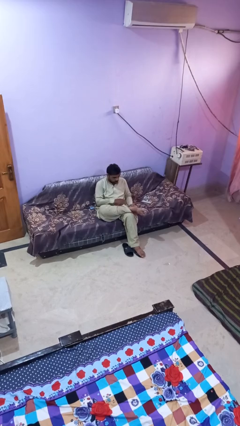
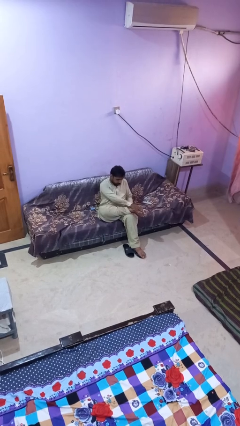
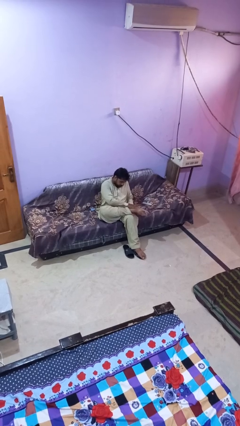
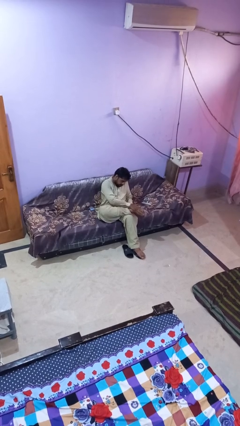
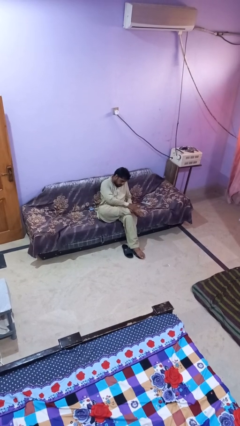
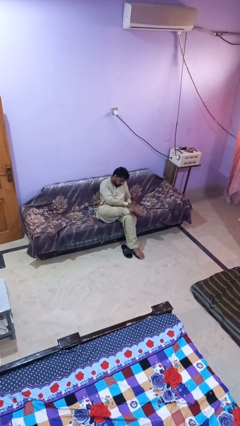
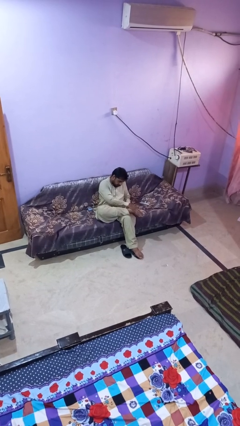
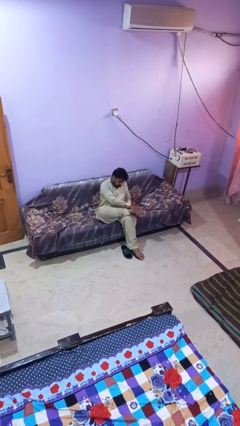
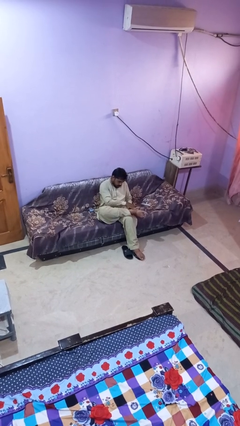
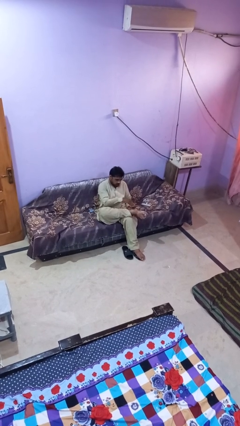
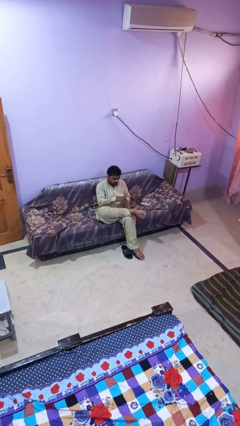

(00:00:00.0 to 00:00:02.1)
person rubs foot

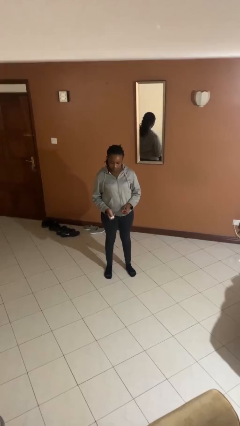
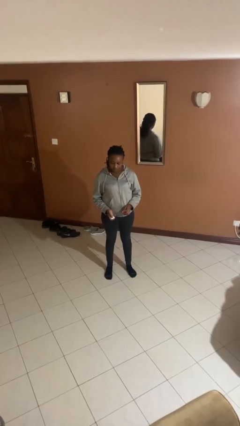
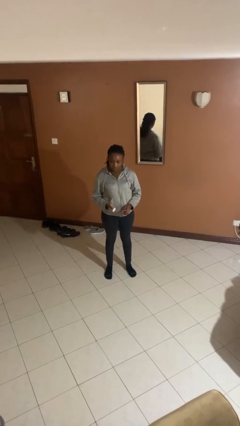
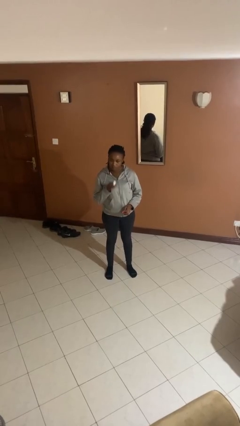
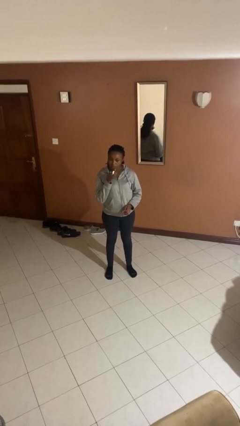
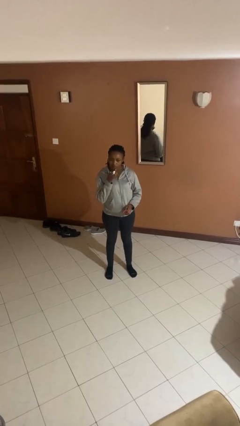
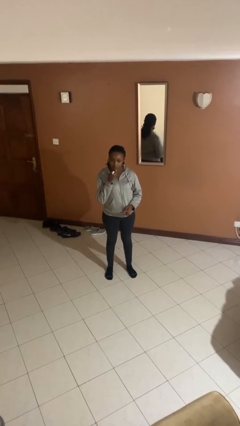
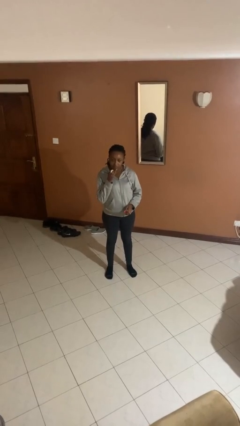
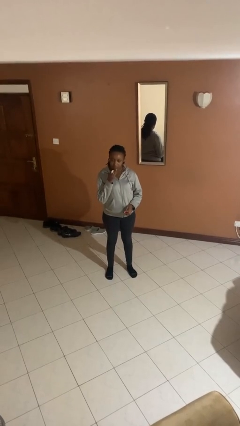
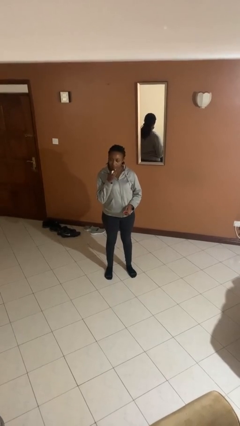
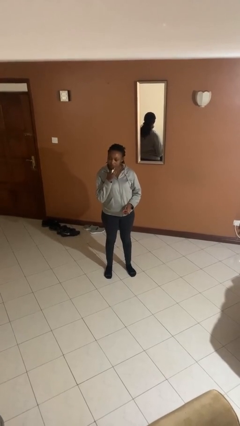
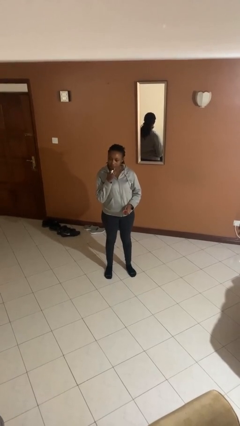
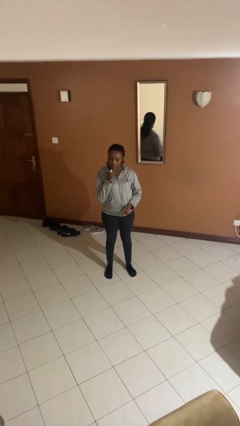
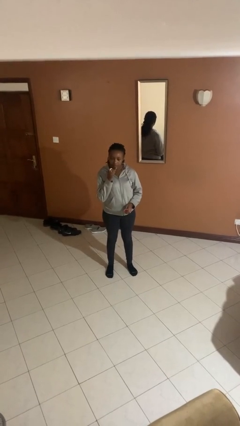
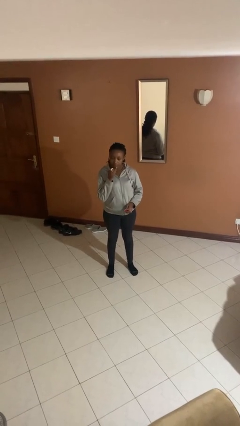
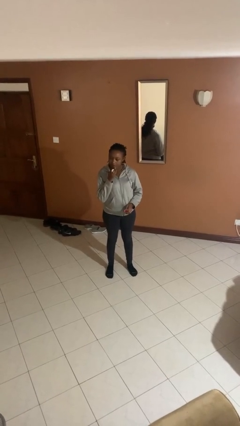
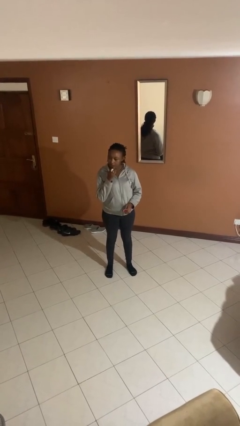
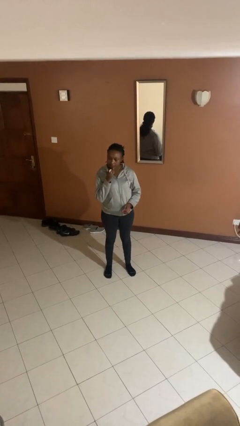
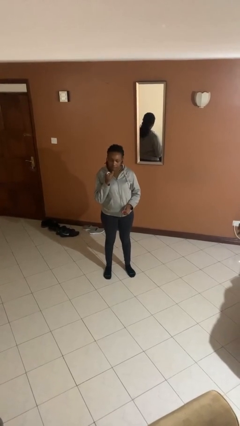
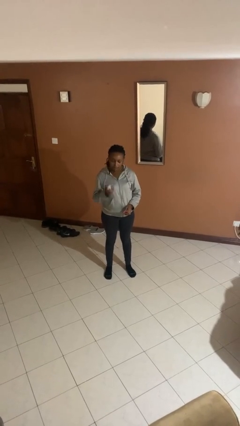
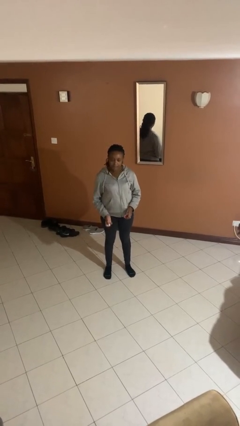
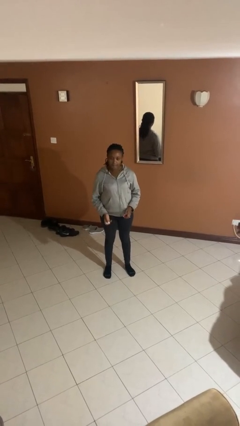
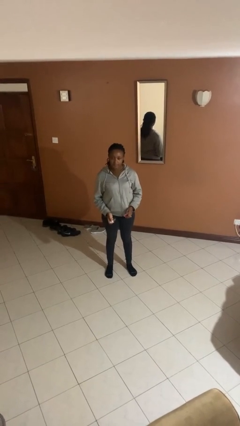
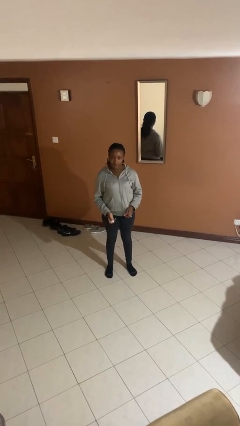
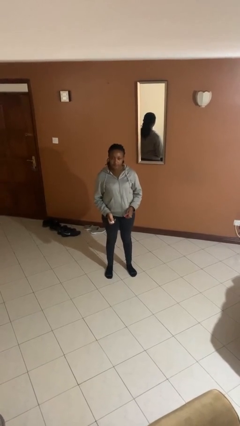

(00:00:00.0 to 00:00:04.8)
person applies lip makeup

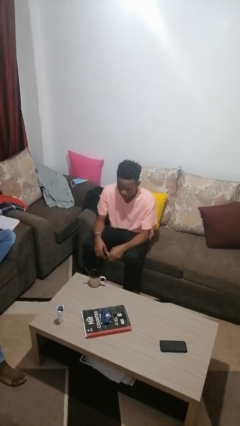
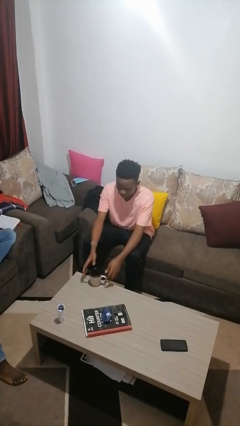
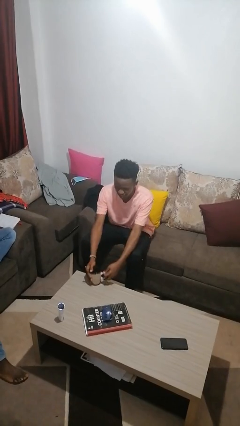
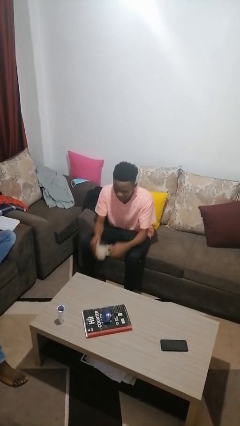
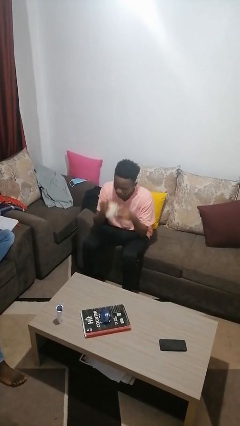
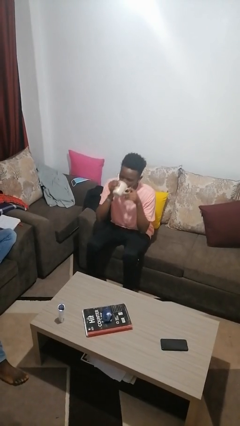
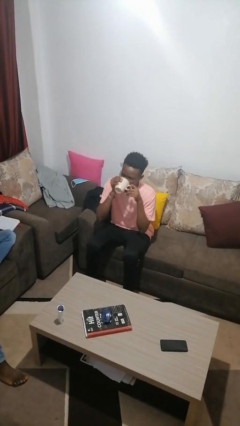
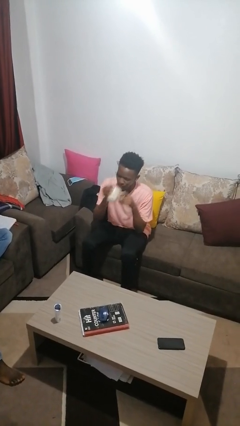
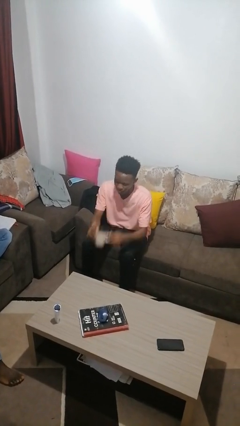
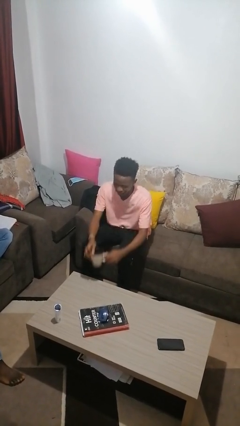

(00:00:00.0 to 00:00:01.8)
person drinks from mug

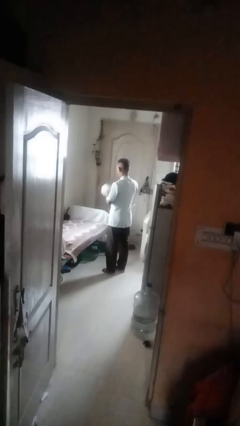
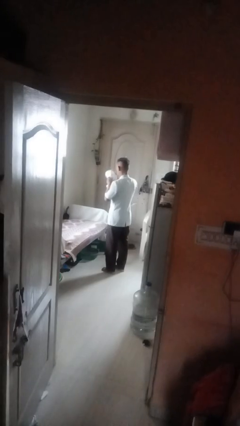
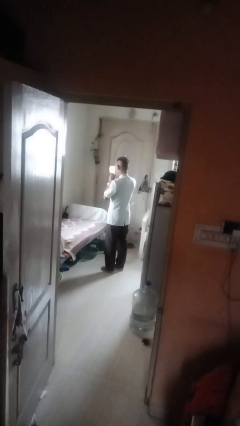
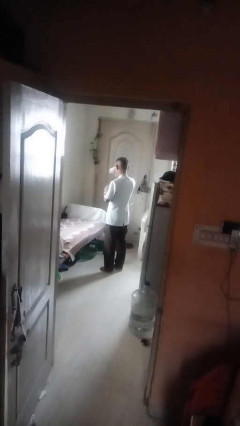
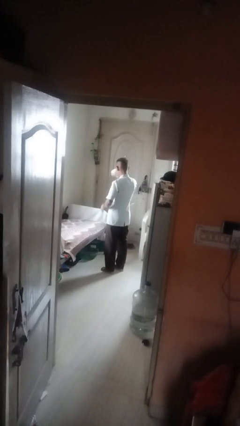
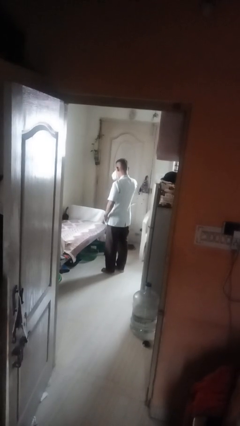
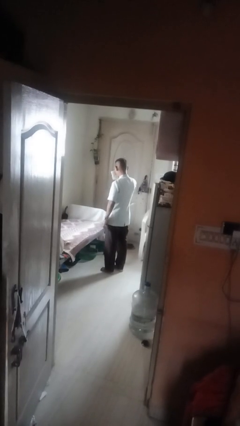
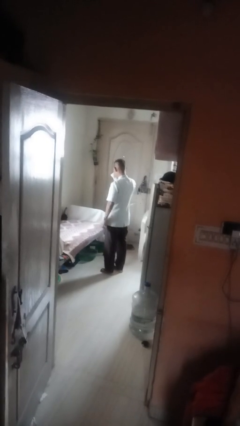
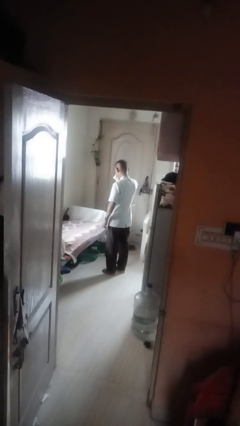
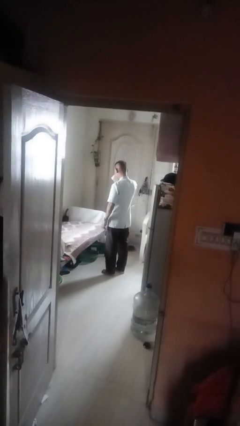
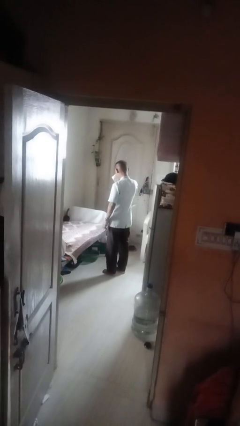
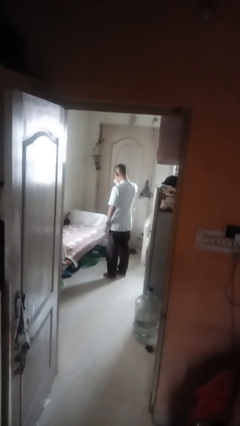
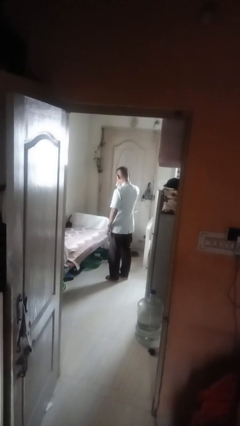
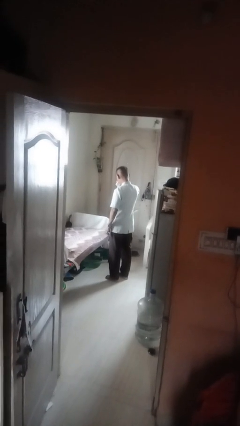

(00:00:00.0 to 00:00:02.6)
person blows nose

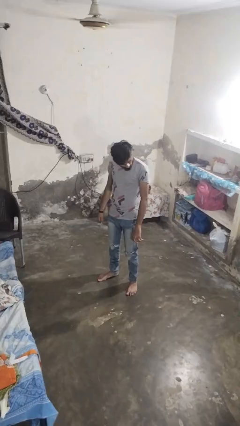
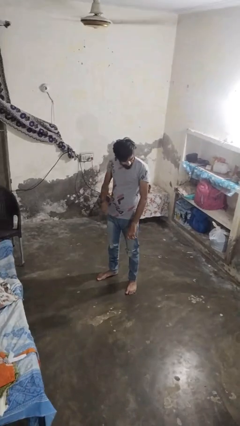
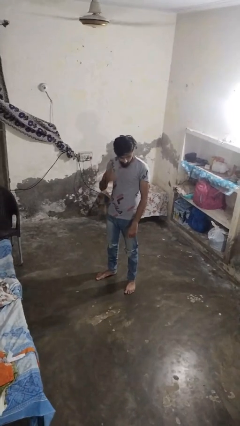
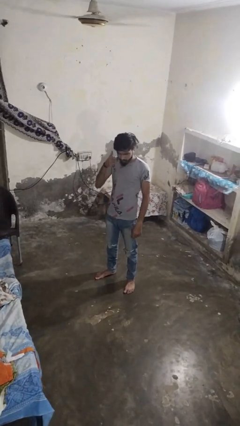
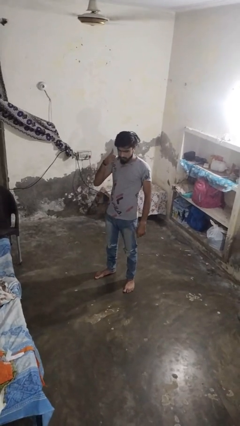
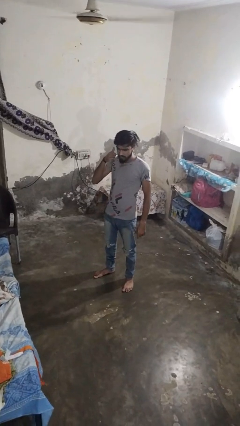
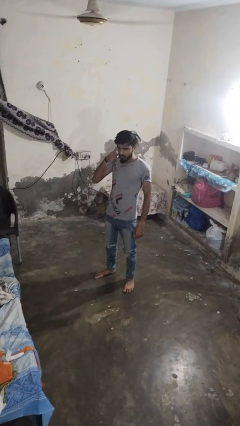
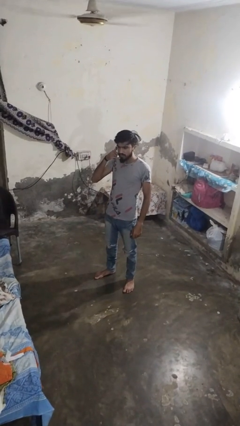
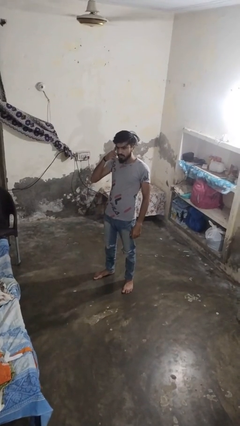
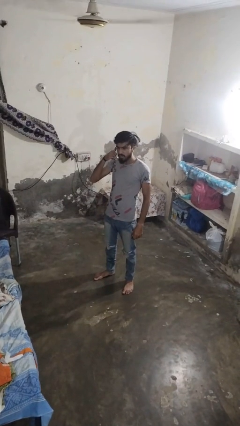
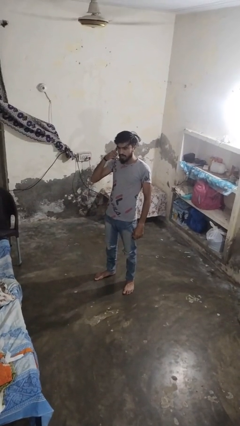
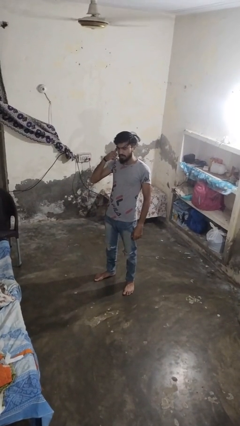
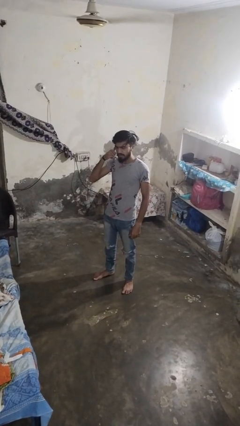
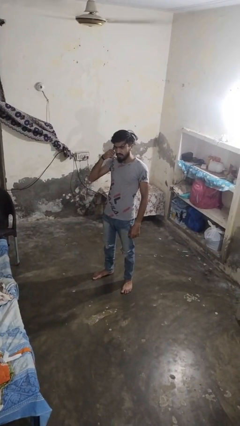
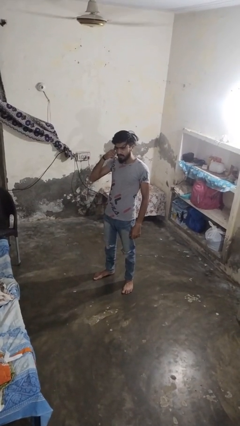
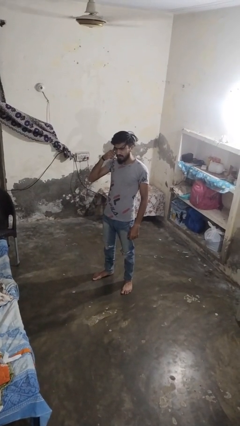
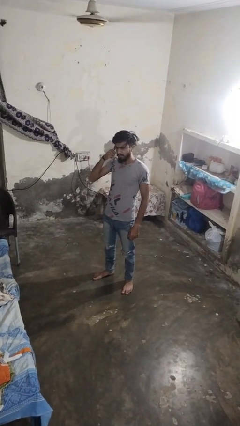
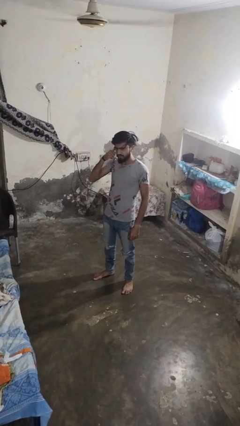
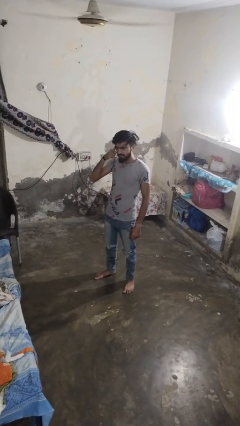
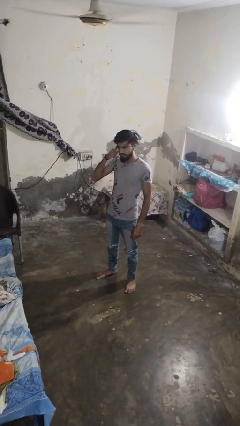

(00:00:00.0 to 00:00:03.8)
person gestures call me

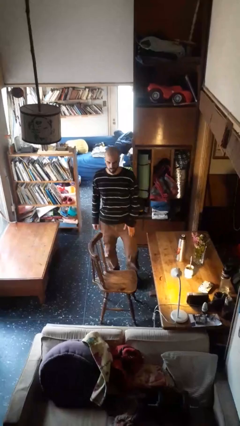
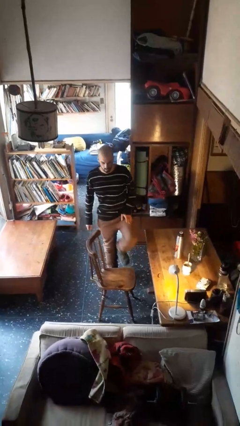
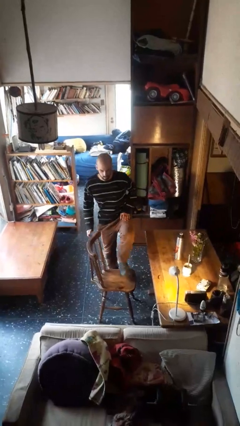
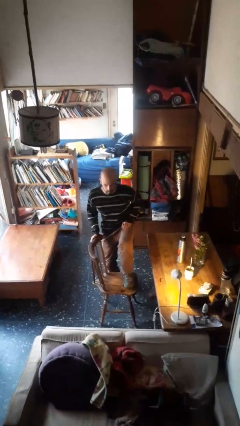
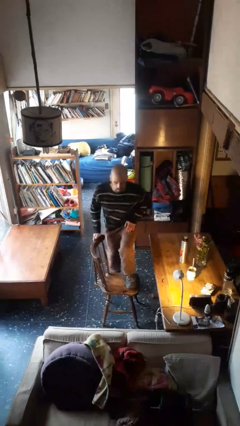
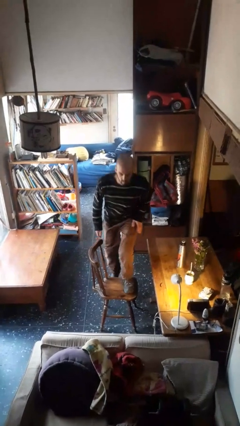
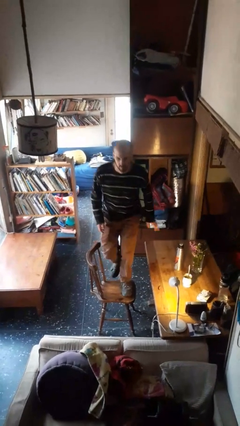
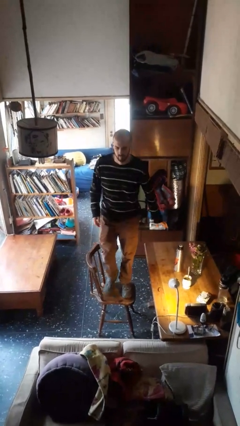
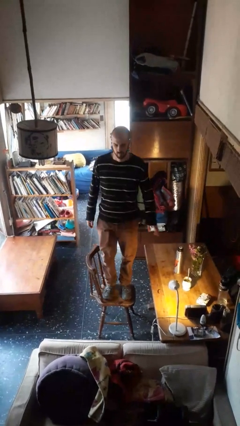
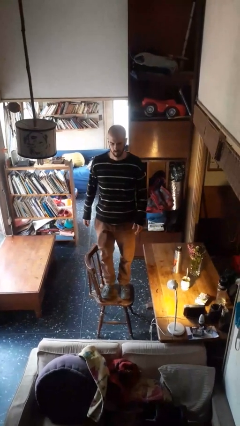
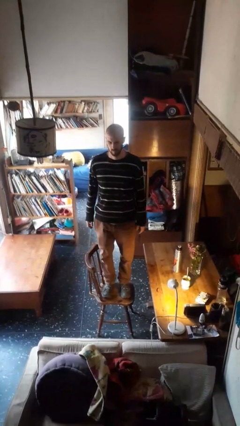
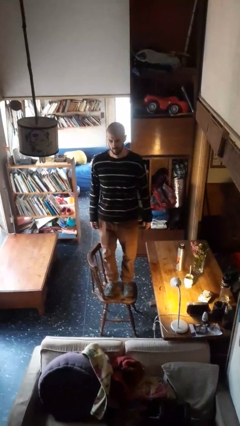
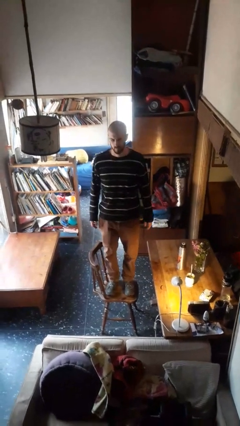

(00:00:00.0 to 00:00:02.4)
person climbs on chair

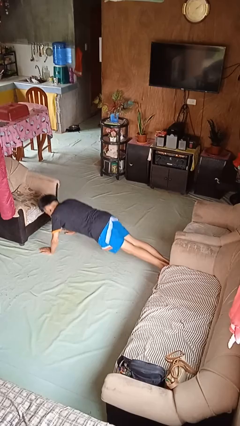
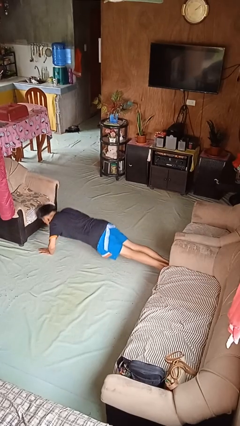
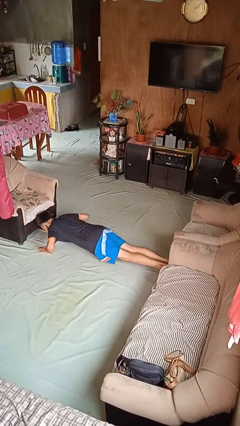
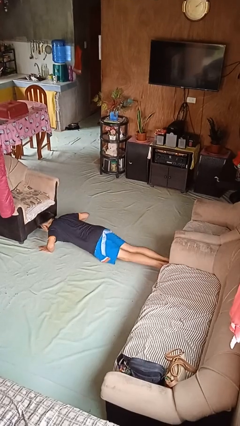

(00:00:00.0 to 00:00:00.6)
person exercises with pushup
